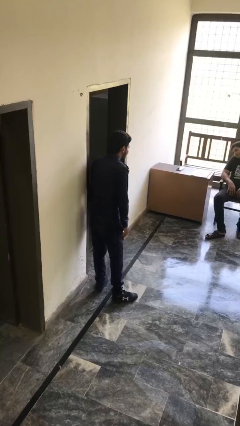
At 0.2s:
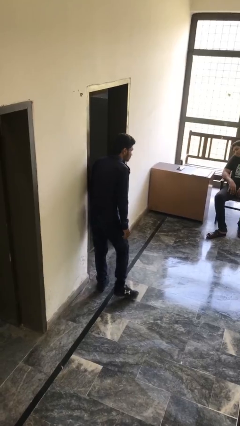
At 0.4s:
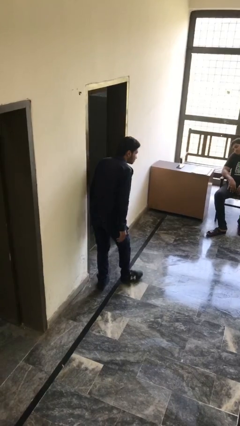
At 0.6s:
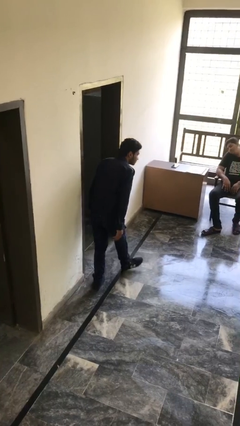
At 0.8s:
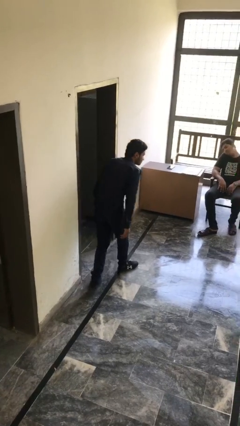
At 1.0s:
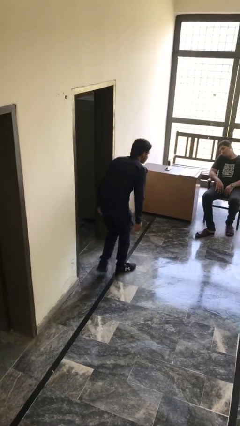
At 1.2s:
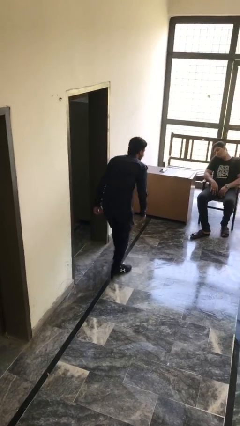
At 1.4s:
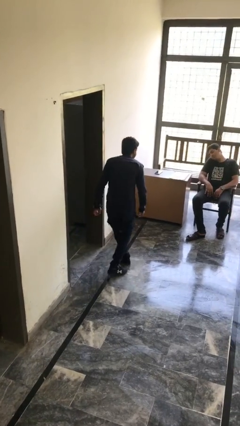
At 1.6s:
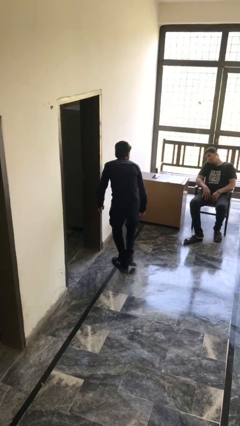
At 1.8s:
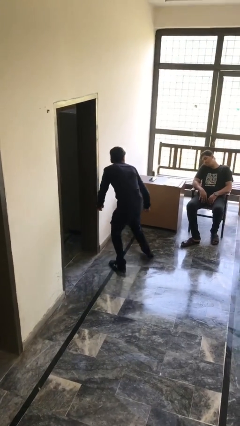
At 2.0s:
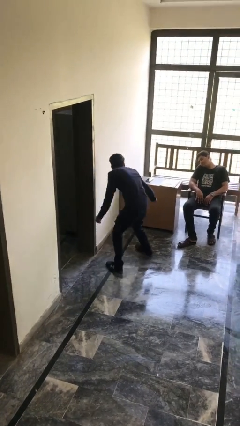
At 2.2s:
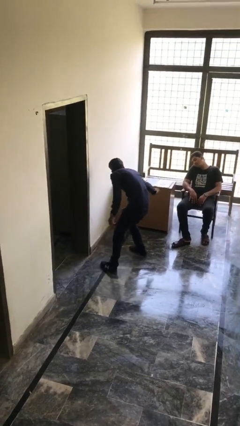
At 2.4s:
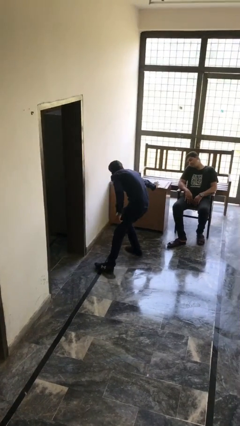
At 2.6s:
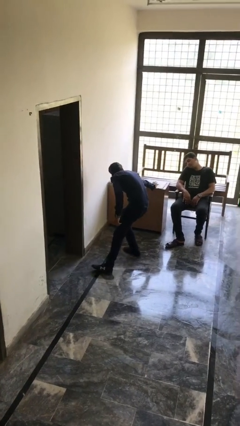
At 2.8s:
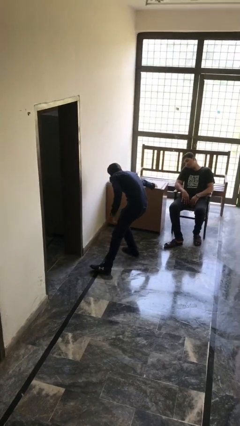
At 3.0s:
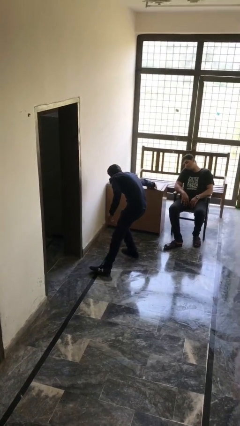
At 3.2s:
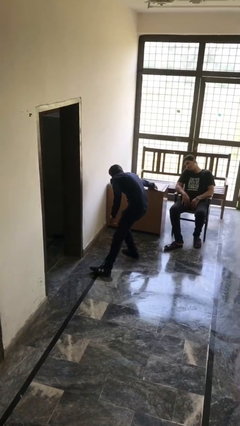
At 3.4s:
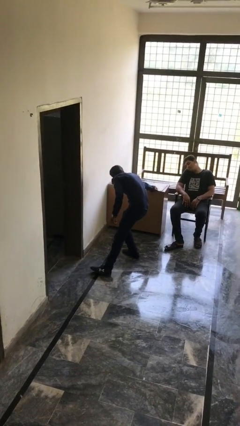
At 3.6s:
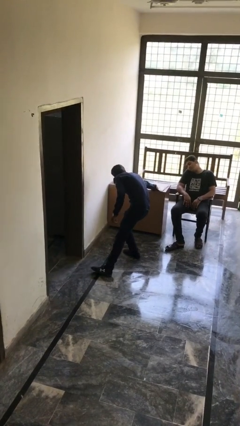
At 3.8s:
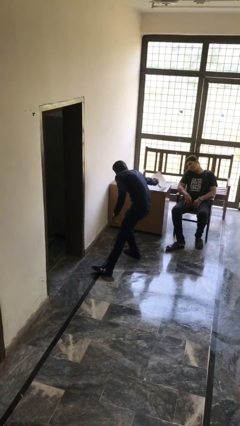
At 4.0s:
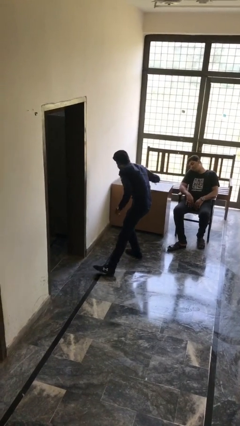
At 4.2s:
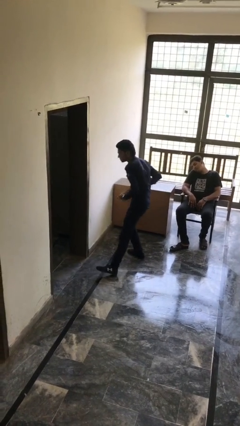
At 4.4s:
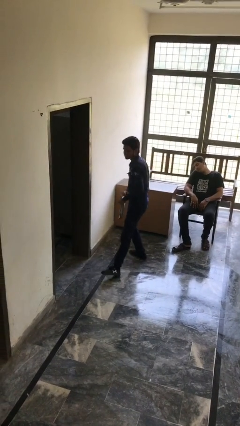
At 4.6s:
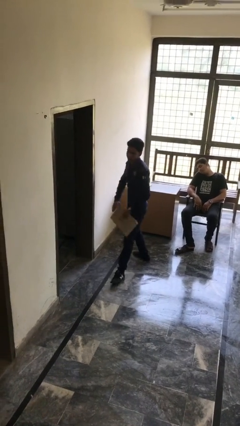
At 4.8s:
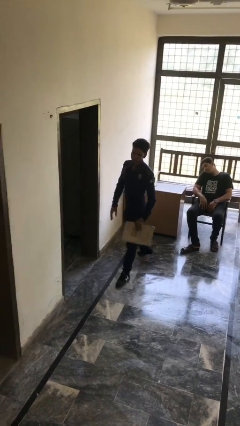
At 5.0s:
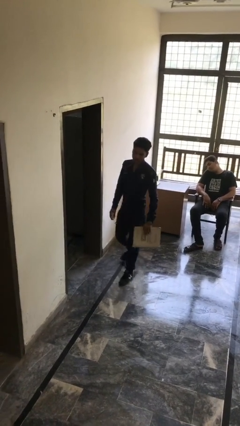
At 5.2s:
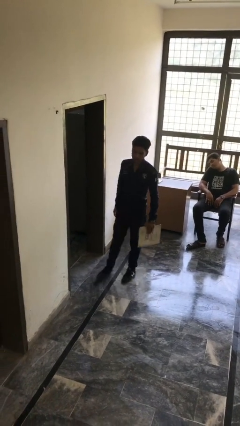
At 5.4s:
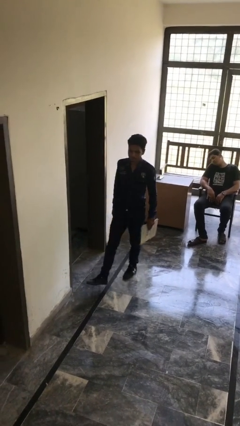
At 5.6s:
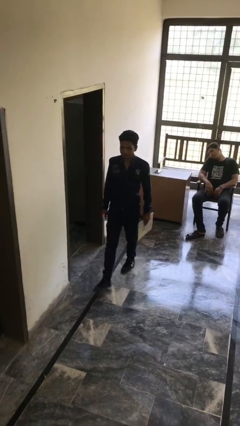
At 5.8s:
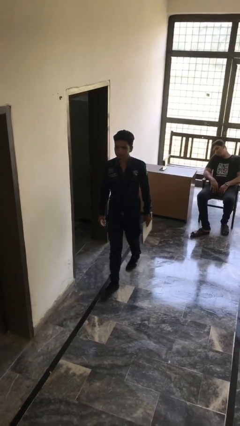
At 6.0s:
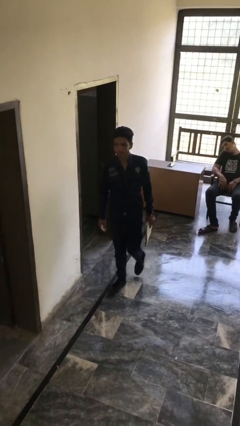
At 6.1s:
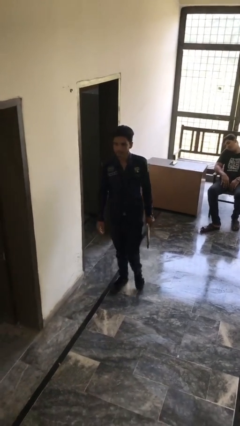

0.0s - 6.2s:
person steals object from person

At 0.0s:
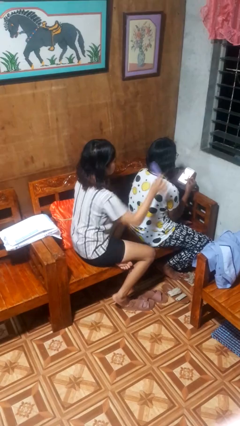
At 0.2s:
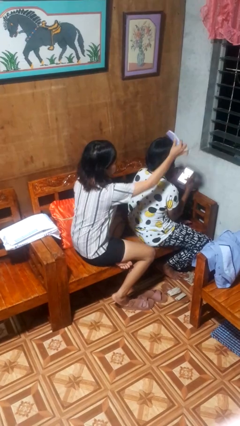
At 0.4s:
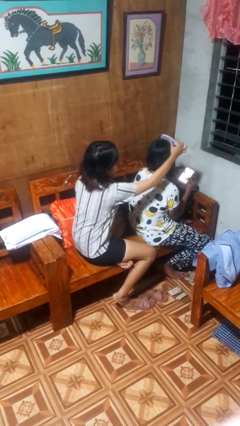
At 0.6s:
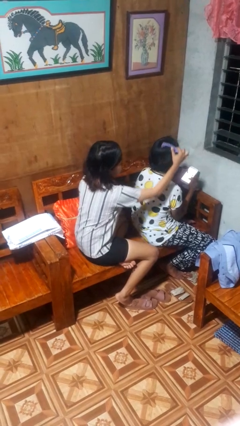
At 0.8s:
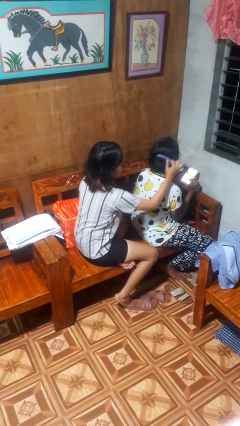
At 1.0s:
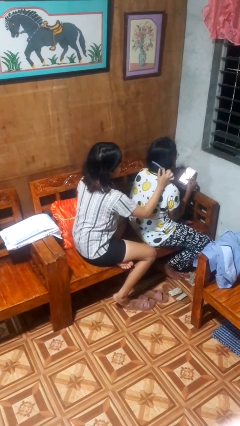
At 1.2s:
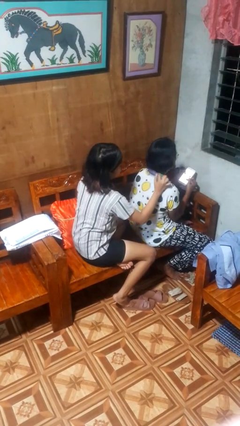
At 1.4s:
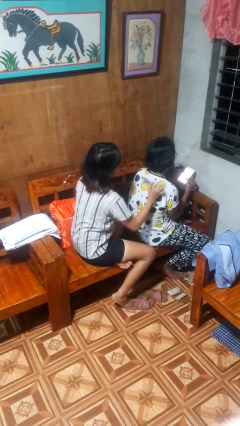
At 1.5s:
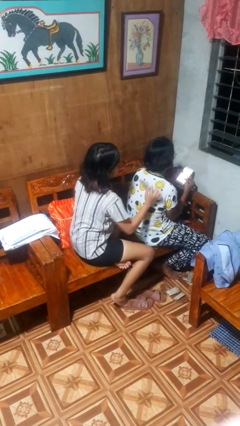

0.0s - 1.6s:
person brushes hair of person

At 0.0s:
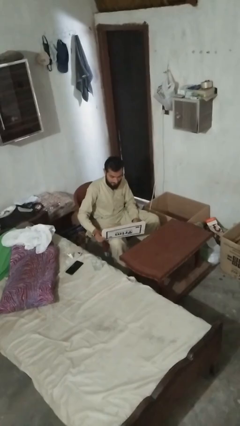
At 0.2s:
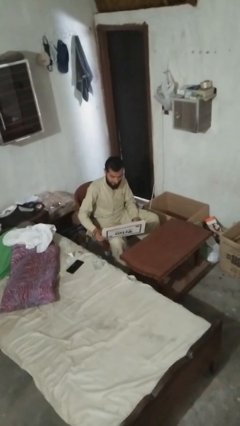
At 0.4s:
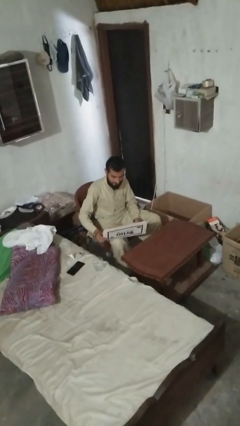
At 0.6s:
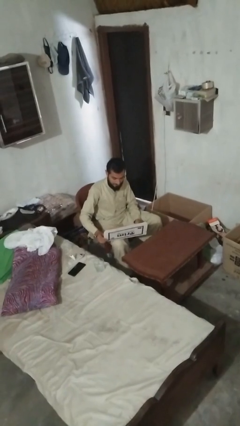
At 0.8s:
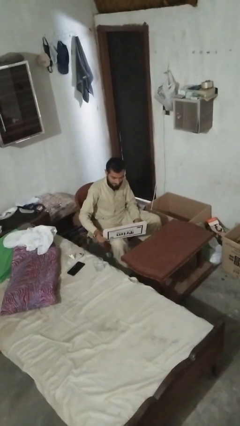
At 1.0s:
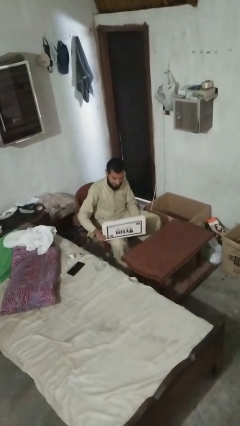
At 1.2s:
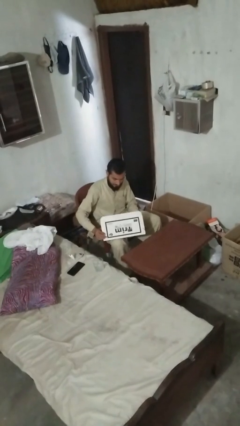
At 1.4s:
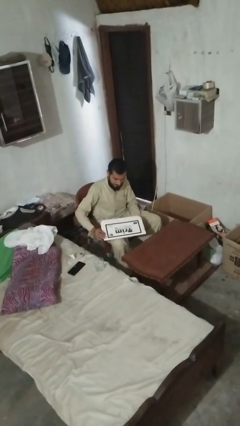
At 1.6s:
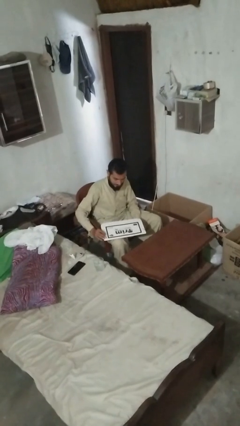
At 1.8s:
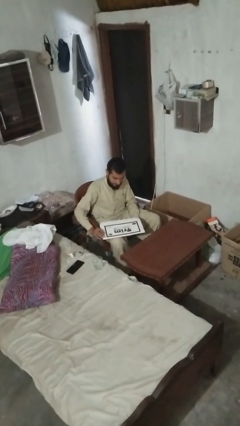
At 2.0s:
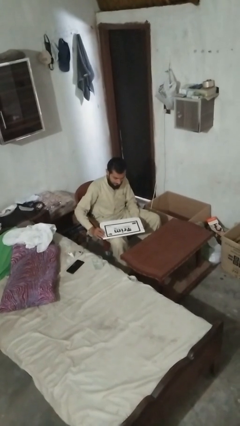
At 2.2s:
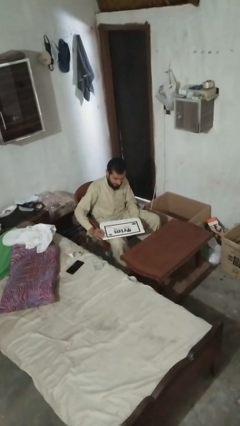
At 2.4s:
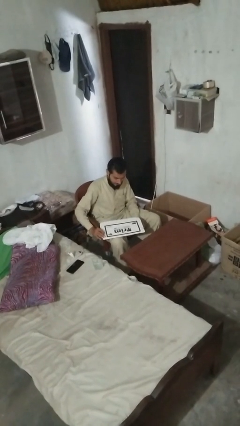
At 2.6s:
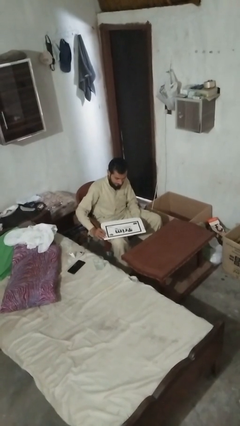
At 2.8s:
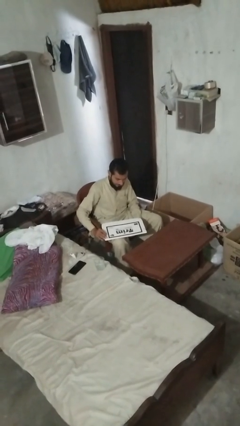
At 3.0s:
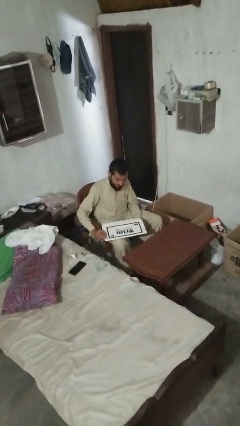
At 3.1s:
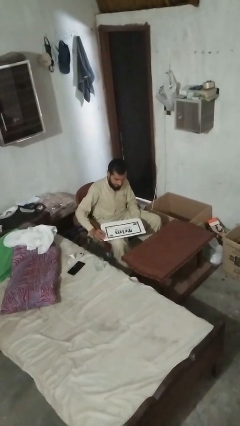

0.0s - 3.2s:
person closes laptop

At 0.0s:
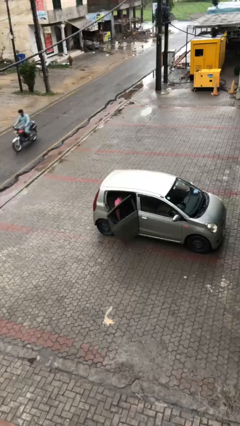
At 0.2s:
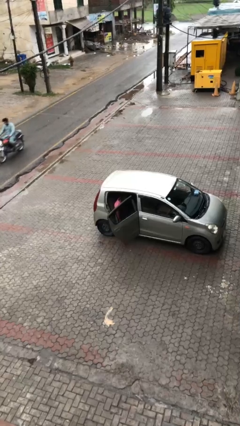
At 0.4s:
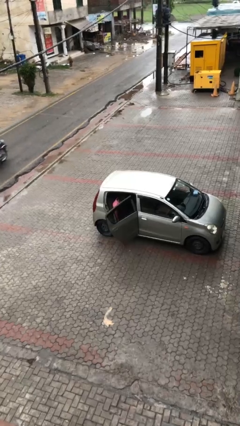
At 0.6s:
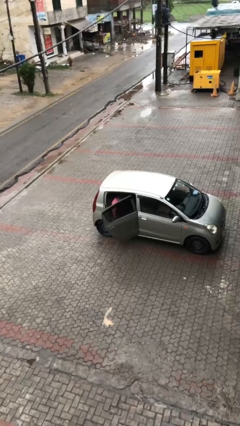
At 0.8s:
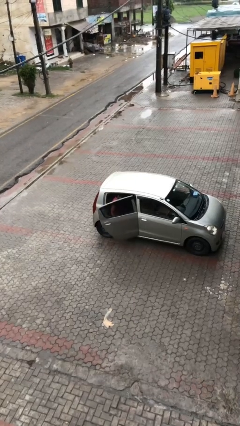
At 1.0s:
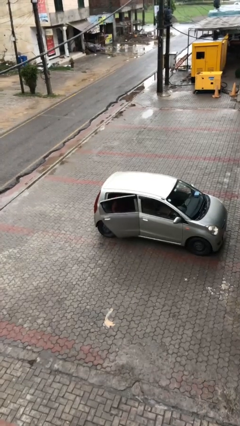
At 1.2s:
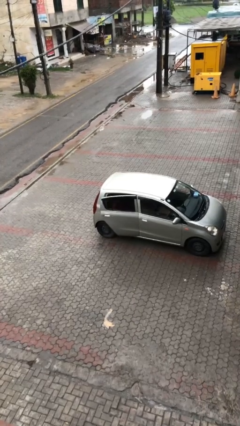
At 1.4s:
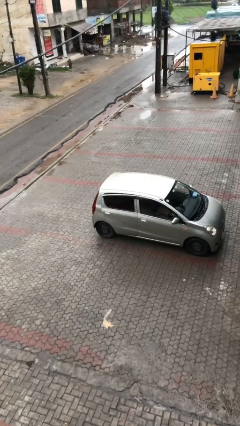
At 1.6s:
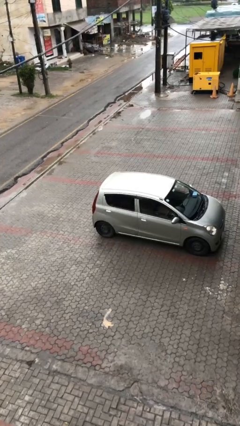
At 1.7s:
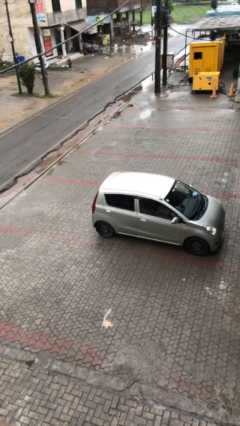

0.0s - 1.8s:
person closes car door

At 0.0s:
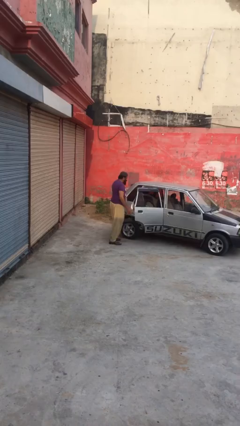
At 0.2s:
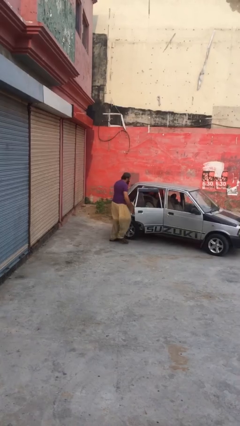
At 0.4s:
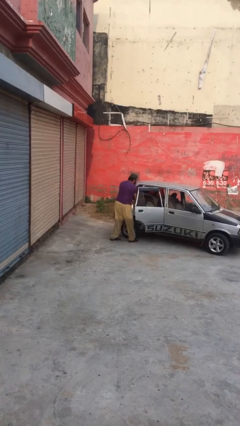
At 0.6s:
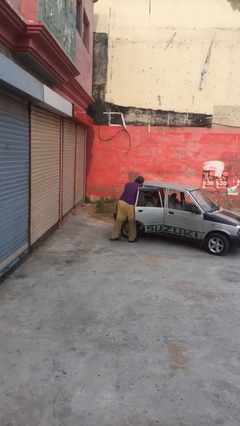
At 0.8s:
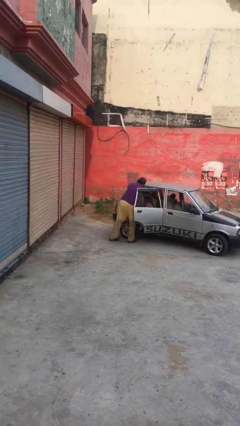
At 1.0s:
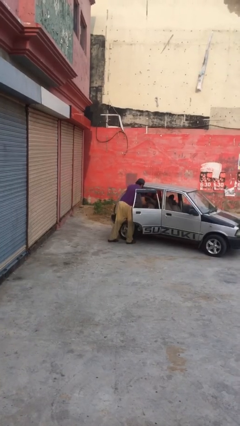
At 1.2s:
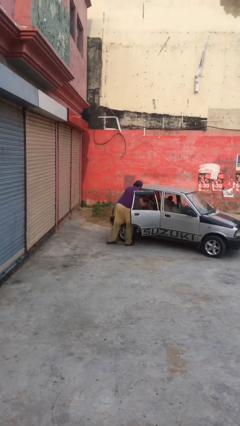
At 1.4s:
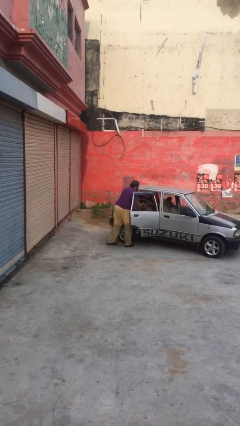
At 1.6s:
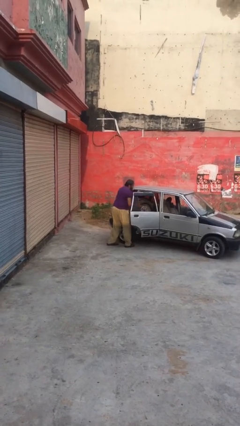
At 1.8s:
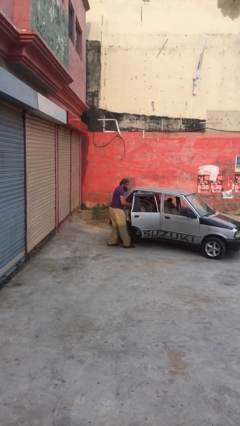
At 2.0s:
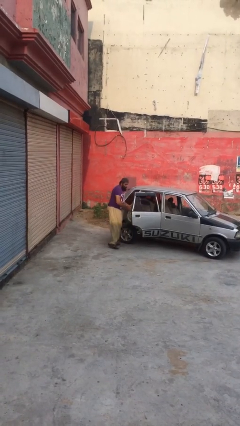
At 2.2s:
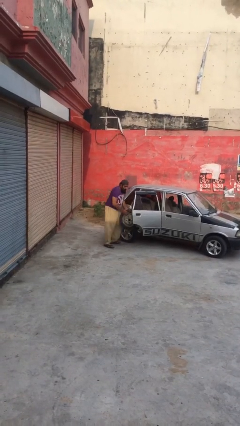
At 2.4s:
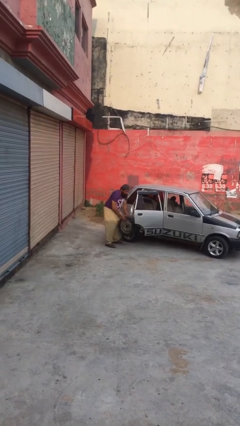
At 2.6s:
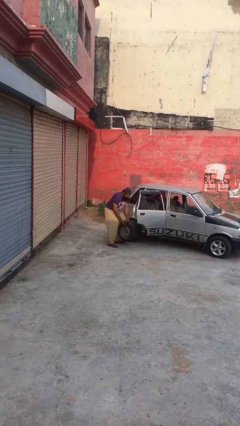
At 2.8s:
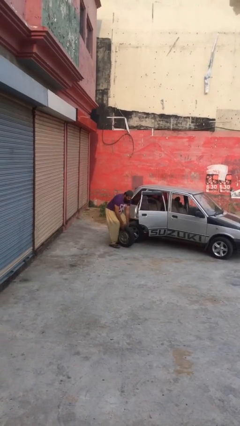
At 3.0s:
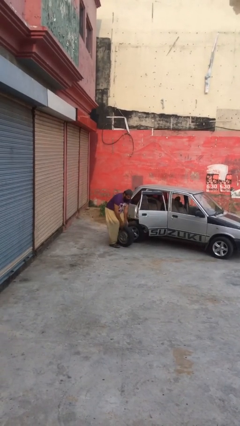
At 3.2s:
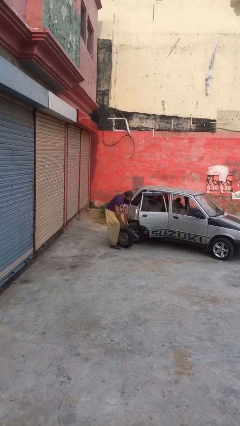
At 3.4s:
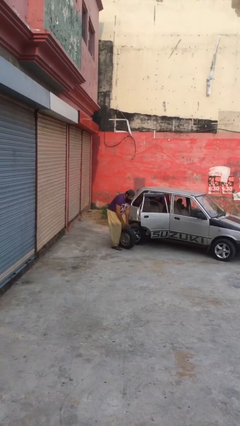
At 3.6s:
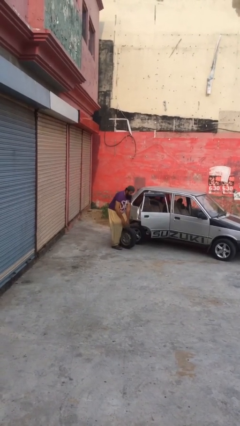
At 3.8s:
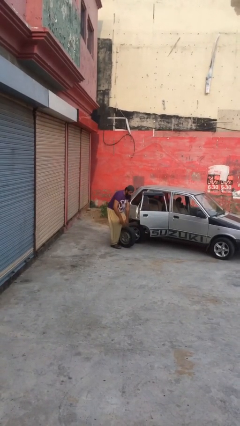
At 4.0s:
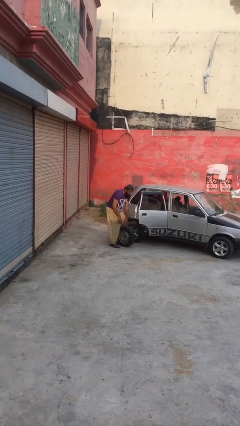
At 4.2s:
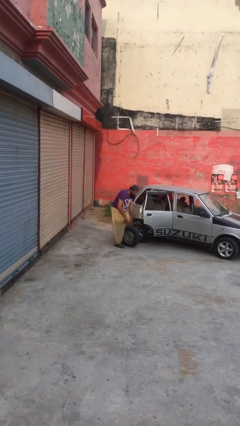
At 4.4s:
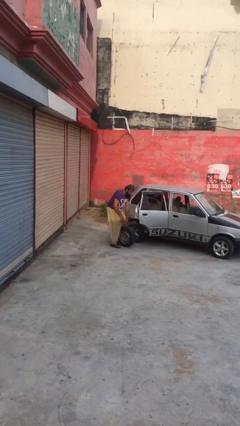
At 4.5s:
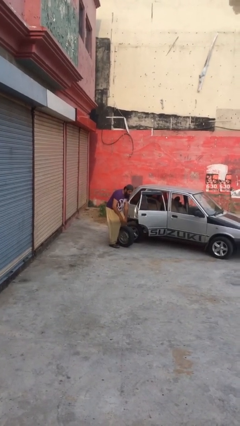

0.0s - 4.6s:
person unloads car
